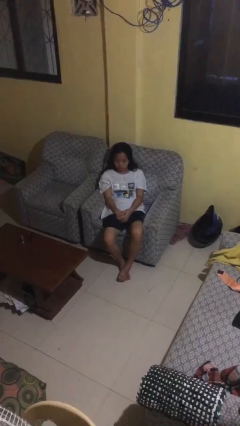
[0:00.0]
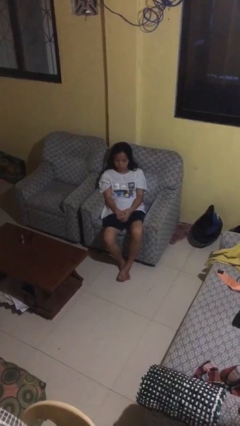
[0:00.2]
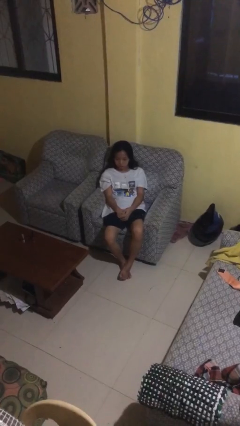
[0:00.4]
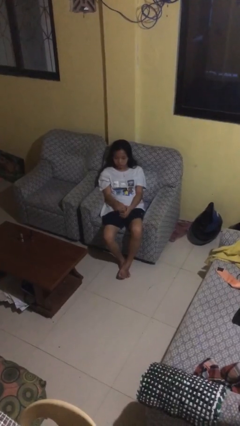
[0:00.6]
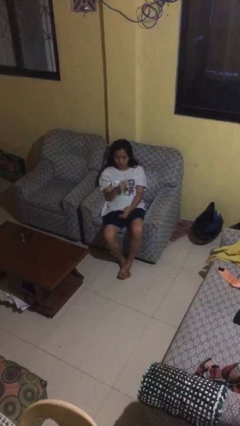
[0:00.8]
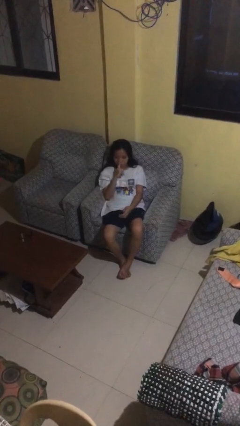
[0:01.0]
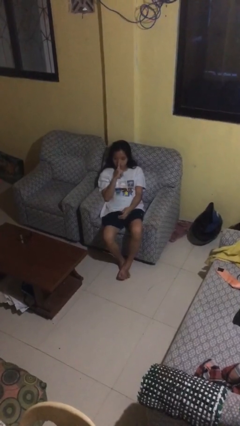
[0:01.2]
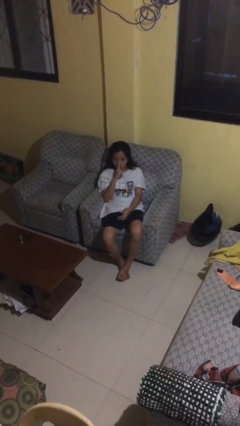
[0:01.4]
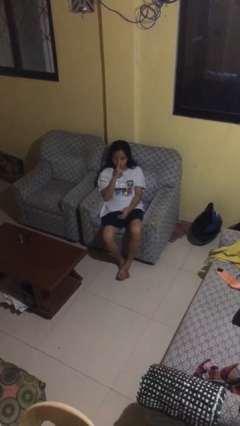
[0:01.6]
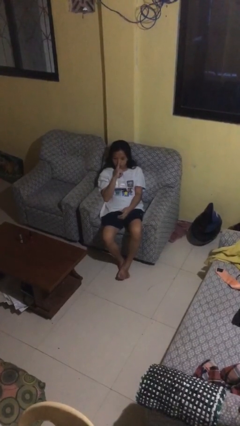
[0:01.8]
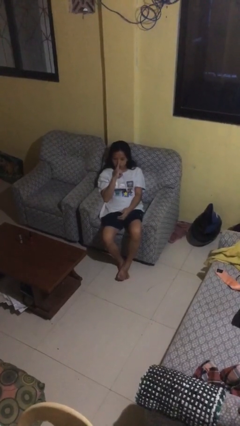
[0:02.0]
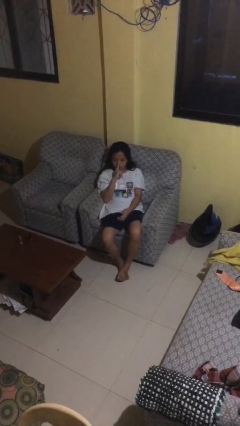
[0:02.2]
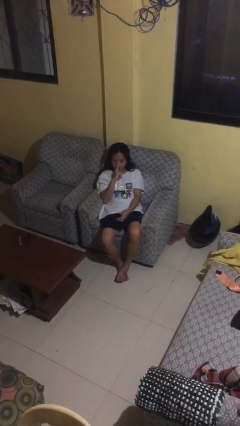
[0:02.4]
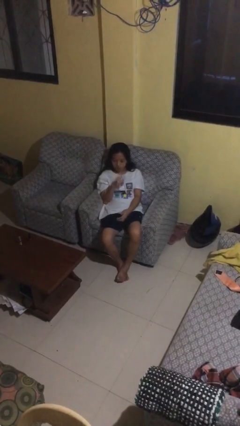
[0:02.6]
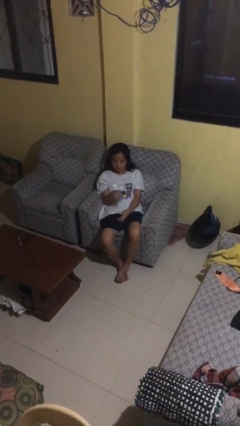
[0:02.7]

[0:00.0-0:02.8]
person gestures be quiet

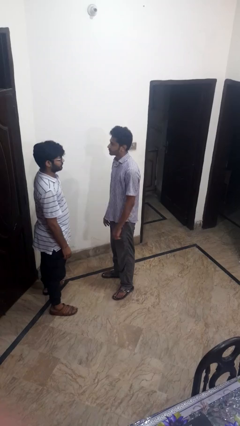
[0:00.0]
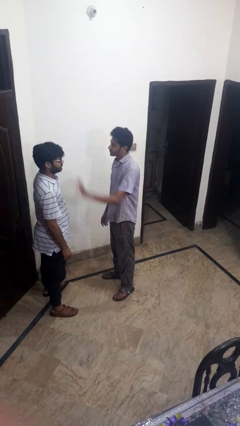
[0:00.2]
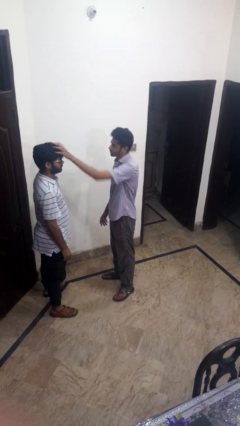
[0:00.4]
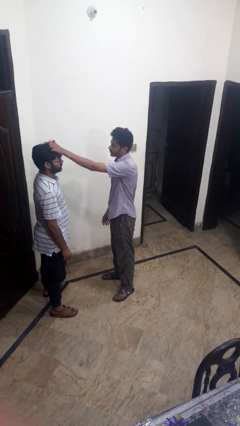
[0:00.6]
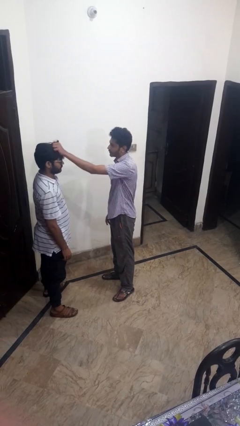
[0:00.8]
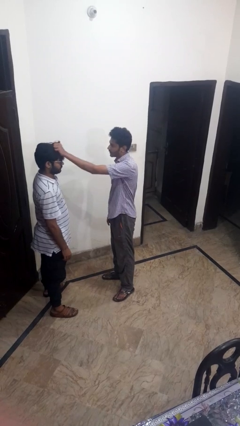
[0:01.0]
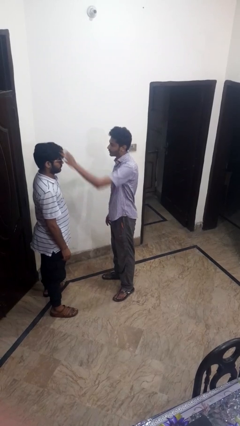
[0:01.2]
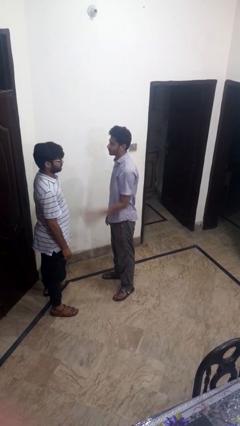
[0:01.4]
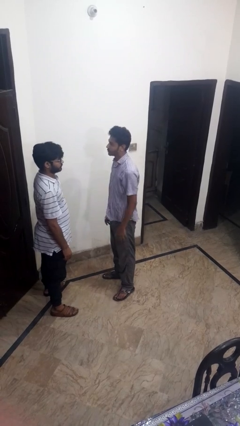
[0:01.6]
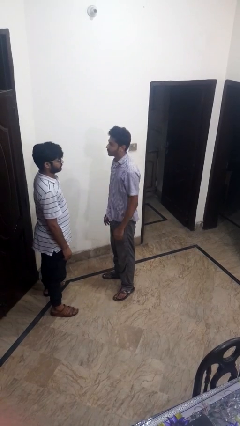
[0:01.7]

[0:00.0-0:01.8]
person grabs person by hair

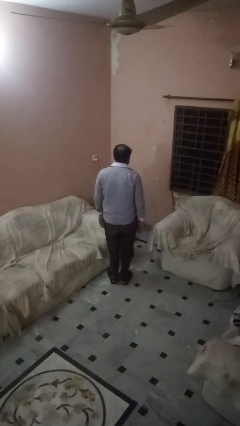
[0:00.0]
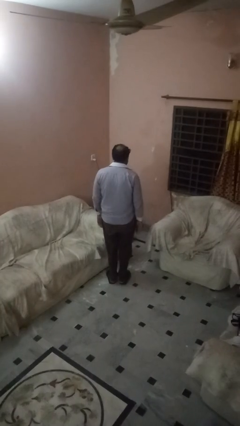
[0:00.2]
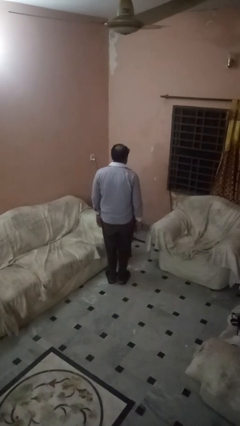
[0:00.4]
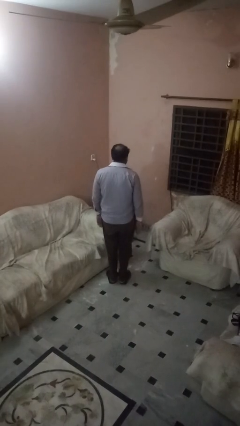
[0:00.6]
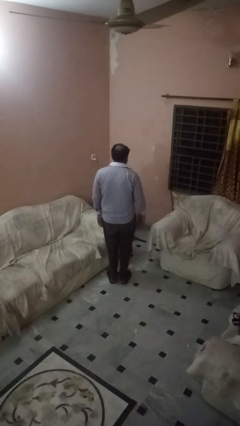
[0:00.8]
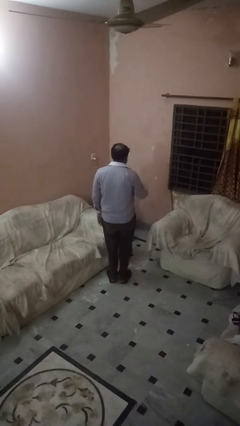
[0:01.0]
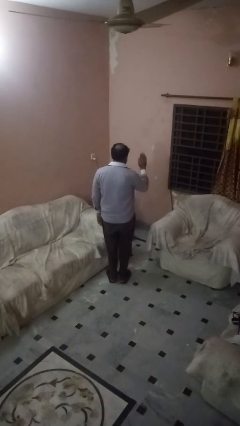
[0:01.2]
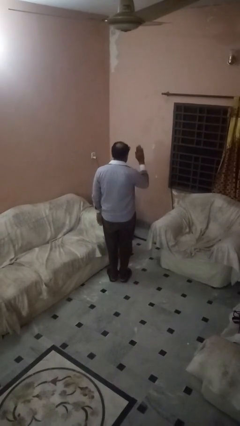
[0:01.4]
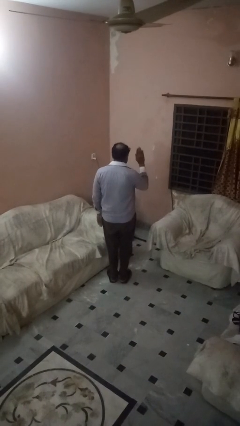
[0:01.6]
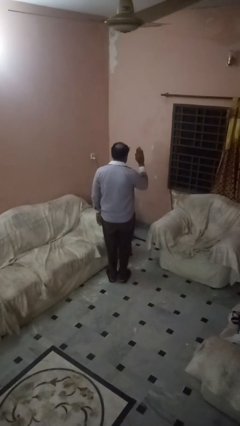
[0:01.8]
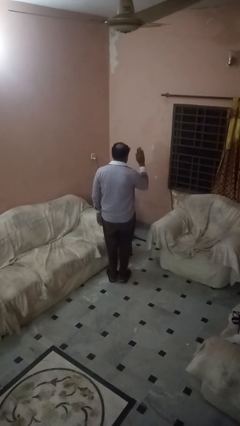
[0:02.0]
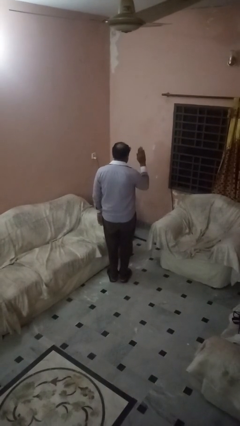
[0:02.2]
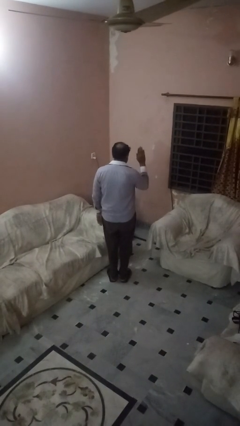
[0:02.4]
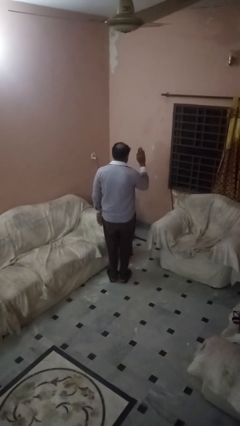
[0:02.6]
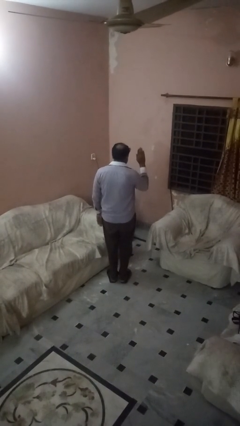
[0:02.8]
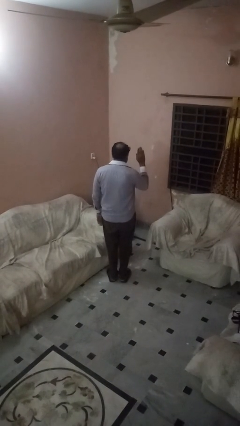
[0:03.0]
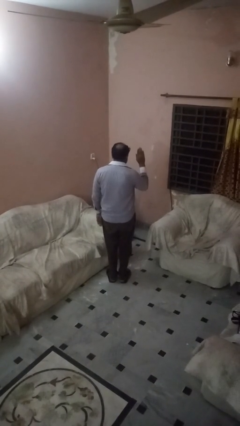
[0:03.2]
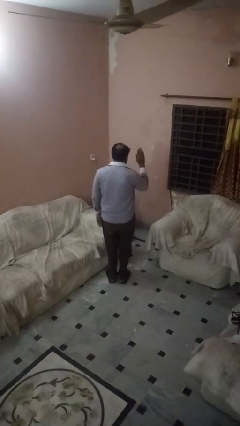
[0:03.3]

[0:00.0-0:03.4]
person gestures stop

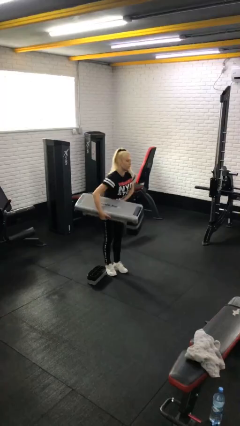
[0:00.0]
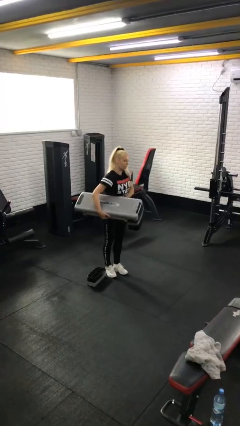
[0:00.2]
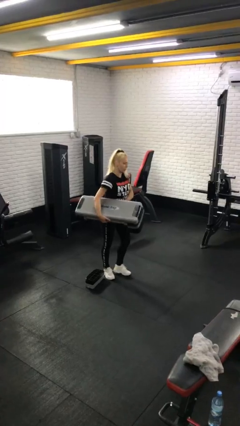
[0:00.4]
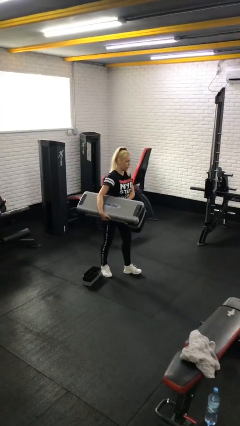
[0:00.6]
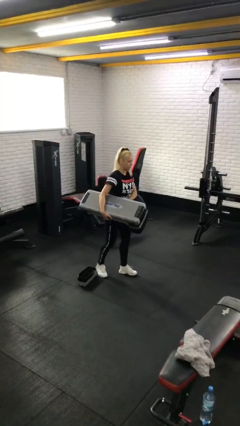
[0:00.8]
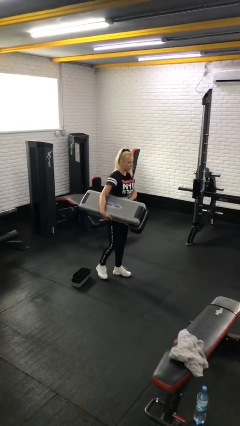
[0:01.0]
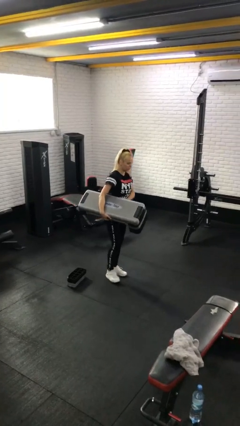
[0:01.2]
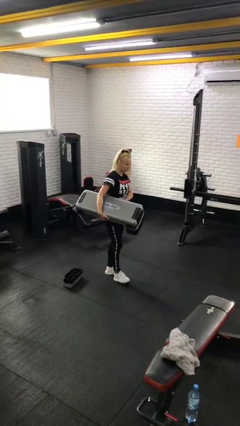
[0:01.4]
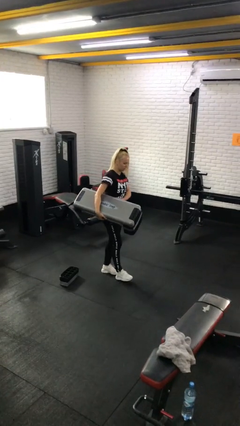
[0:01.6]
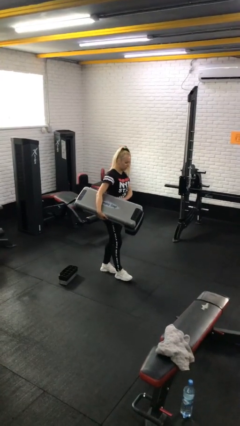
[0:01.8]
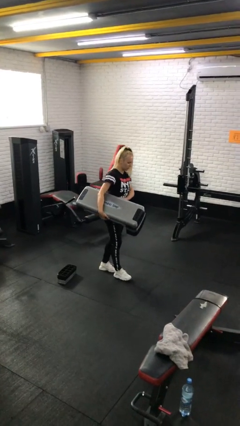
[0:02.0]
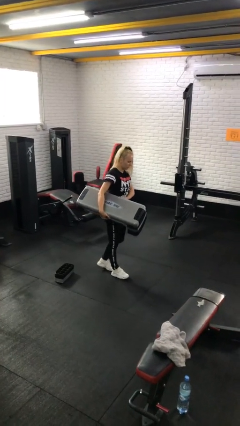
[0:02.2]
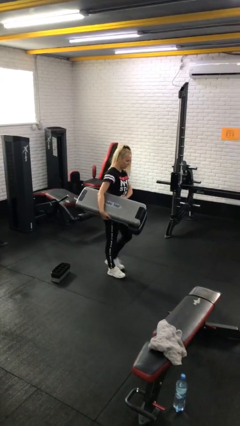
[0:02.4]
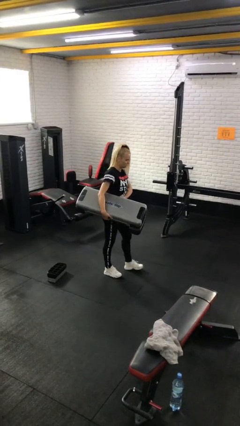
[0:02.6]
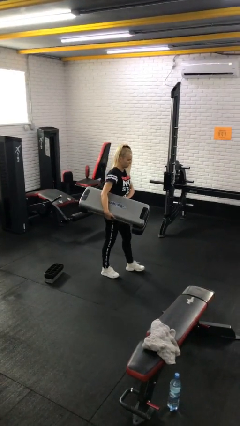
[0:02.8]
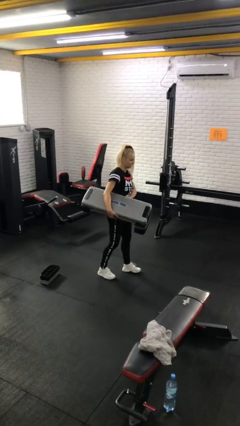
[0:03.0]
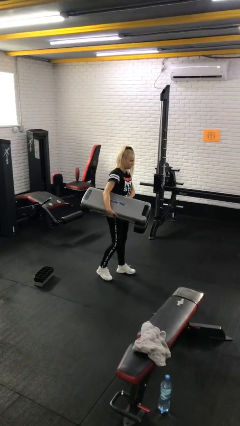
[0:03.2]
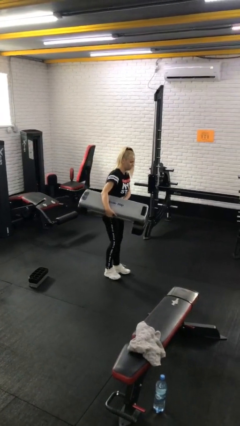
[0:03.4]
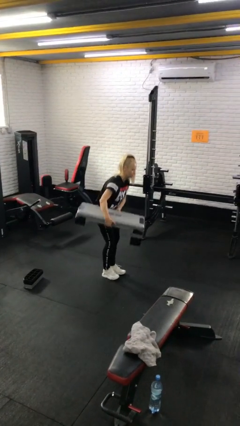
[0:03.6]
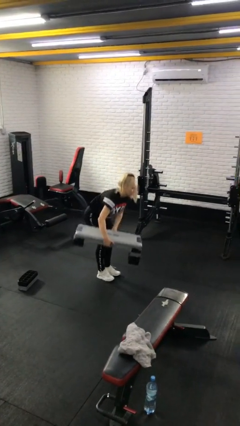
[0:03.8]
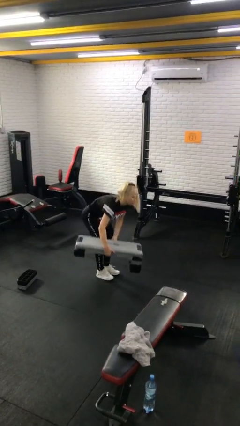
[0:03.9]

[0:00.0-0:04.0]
person carries heavy object

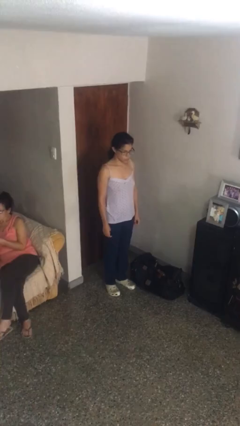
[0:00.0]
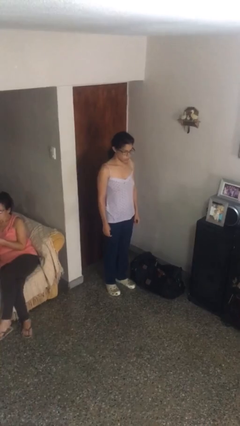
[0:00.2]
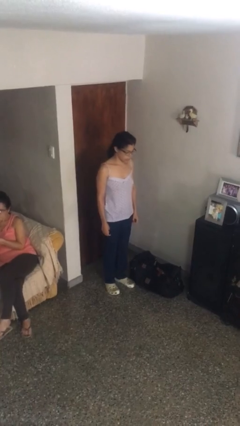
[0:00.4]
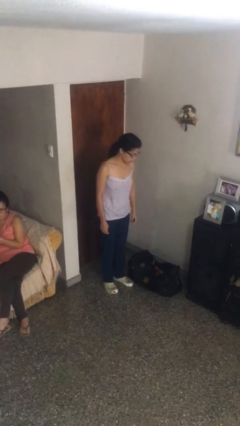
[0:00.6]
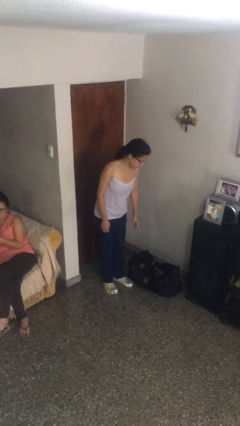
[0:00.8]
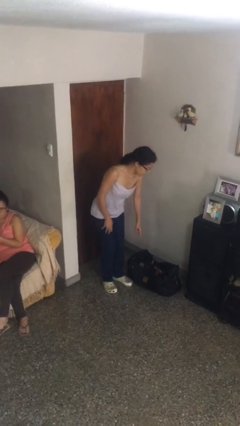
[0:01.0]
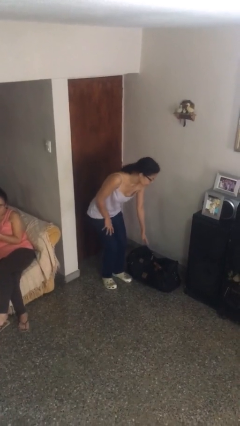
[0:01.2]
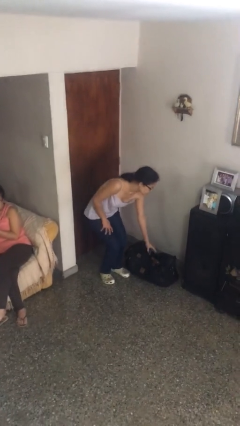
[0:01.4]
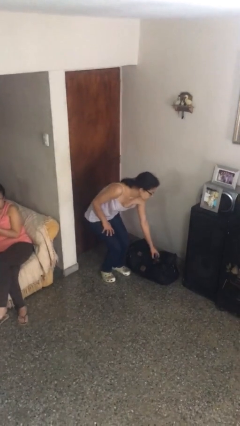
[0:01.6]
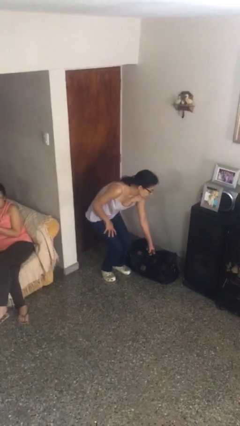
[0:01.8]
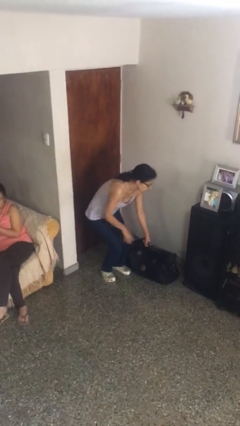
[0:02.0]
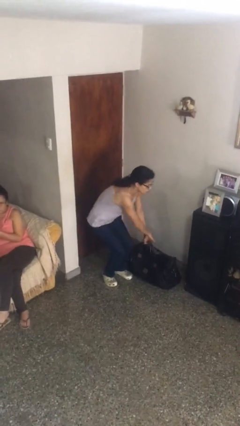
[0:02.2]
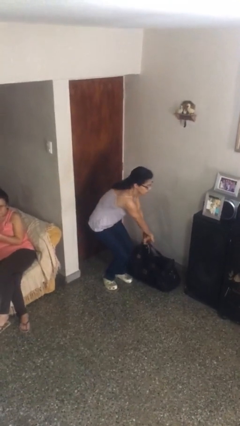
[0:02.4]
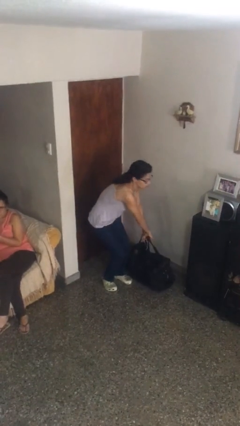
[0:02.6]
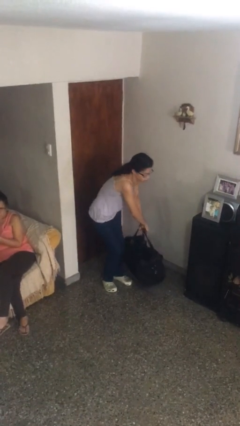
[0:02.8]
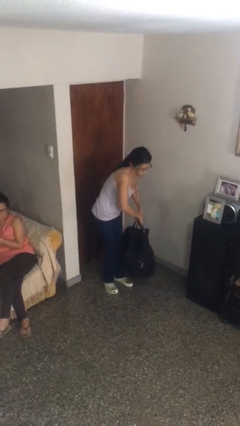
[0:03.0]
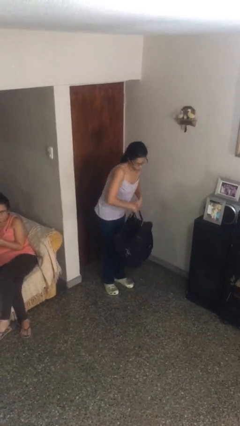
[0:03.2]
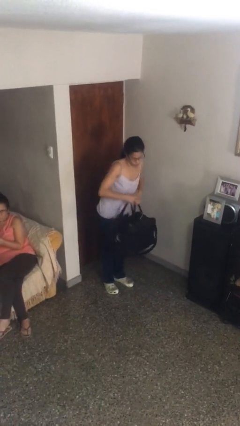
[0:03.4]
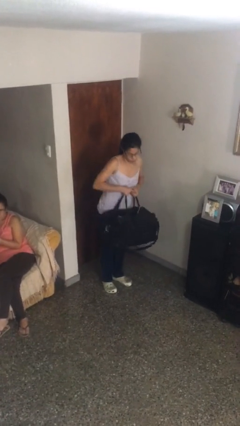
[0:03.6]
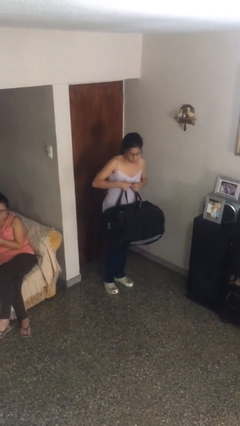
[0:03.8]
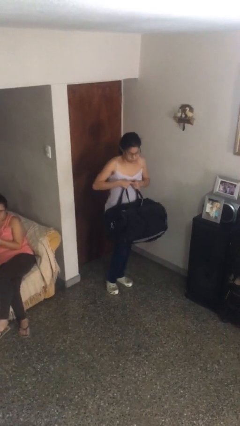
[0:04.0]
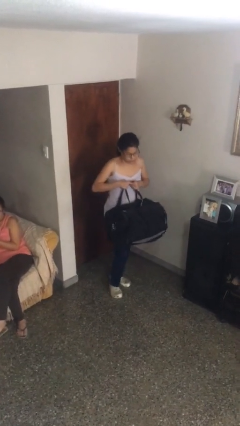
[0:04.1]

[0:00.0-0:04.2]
person picks up object from floor

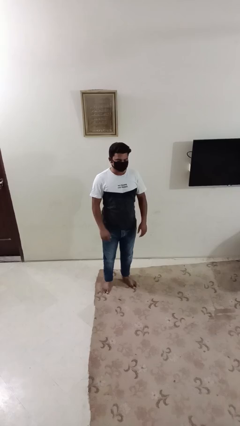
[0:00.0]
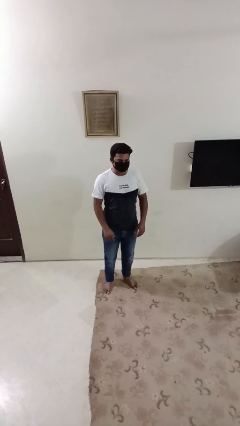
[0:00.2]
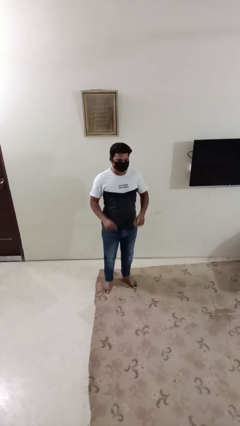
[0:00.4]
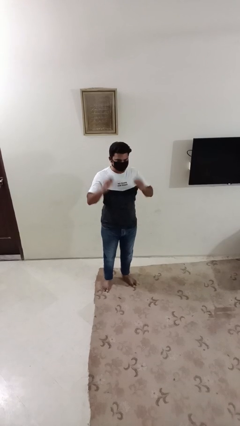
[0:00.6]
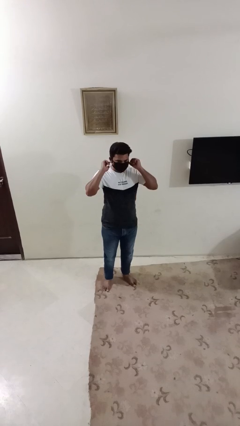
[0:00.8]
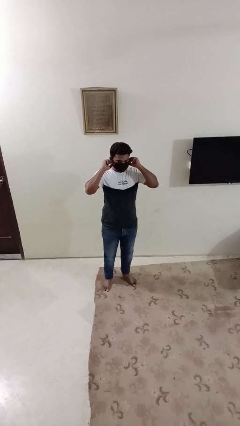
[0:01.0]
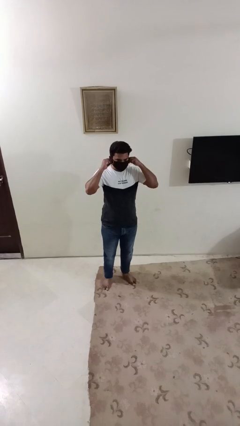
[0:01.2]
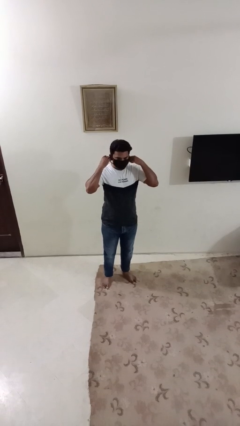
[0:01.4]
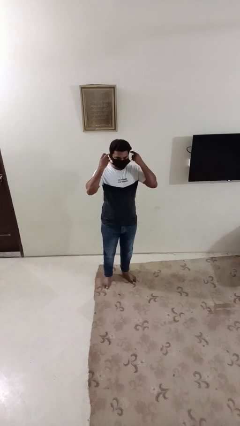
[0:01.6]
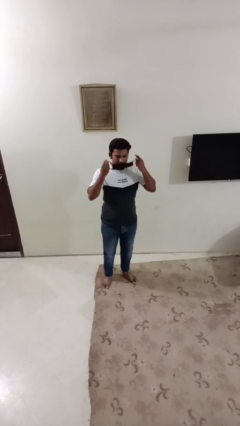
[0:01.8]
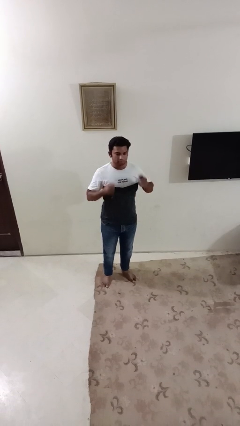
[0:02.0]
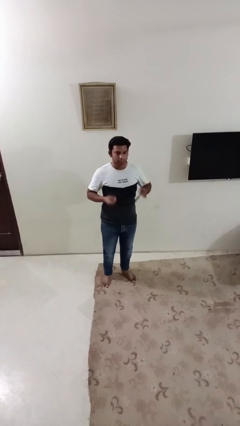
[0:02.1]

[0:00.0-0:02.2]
person takes off facemask
